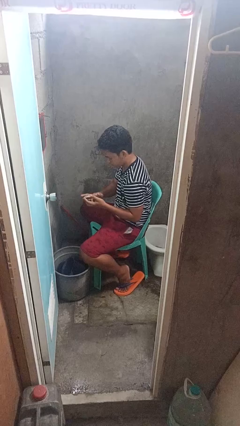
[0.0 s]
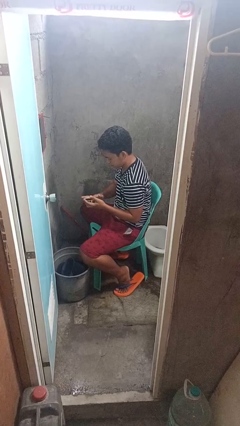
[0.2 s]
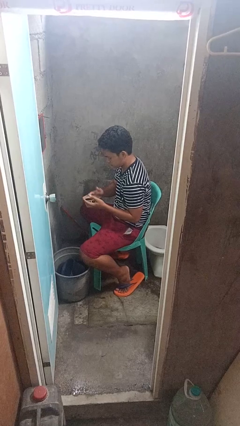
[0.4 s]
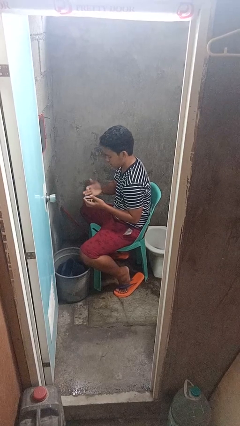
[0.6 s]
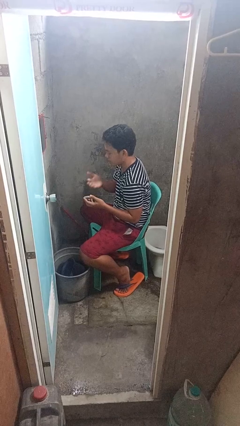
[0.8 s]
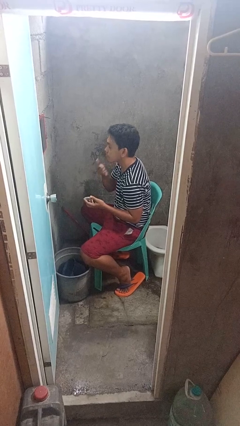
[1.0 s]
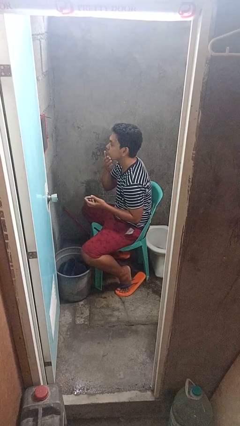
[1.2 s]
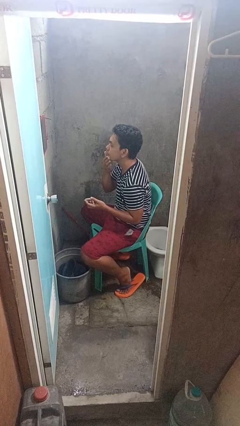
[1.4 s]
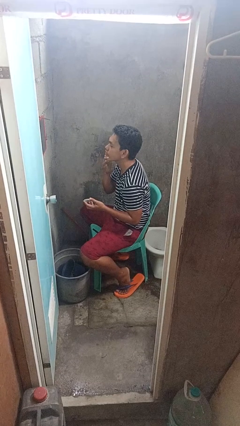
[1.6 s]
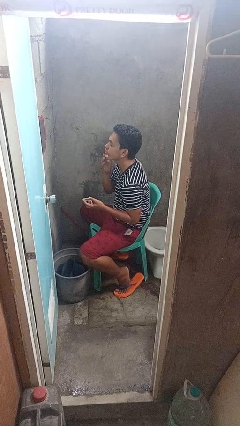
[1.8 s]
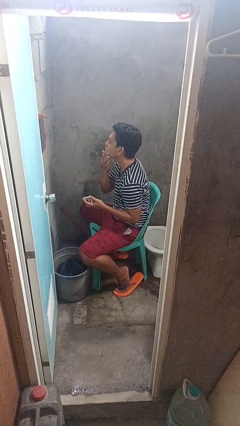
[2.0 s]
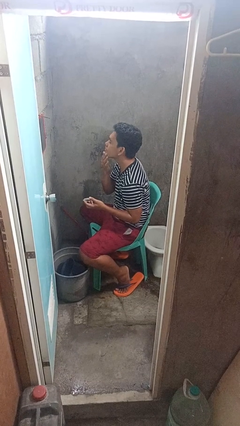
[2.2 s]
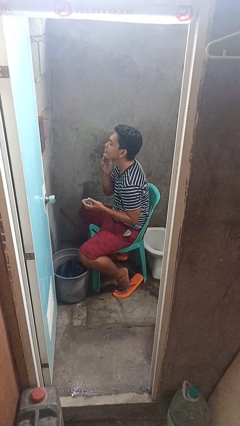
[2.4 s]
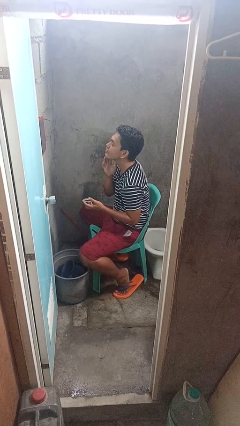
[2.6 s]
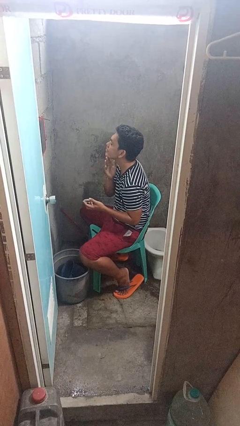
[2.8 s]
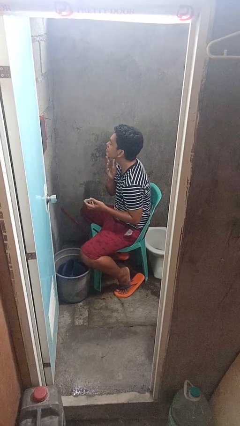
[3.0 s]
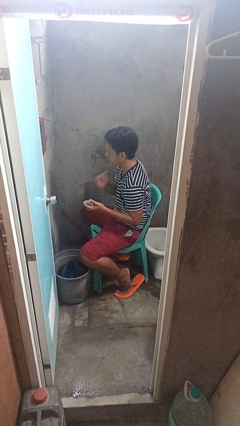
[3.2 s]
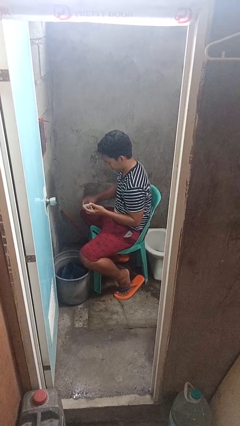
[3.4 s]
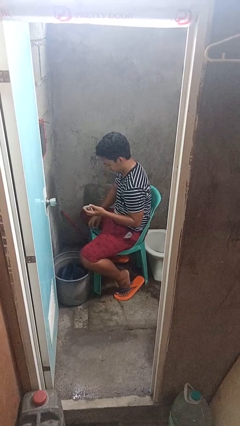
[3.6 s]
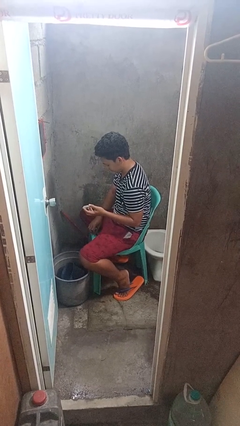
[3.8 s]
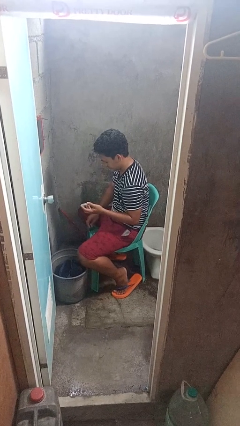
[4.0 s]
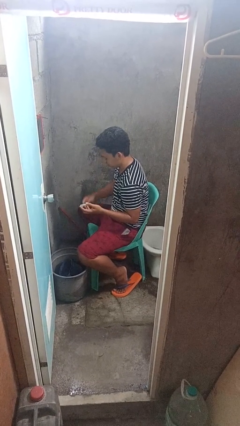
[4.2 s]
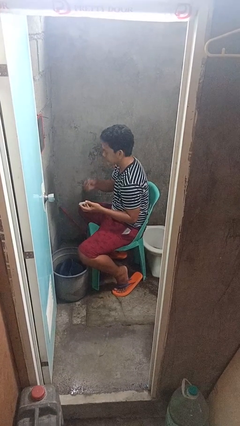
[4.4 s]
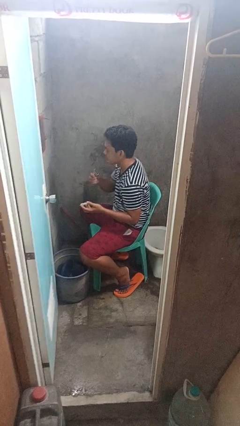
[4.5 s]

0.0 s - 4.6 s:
person applies shaving cream

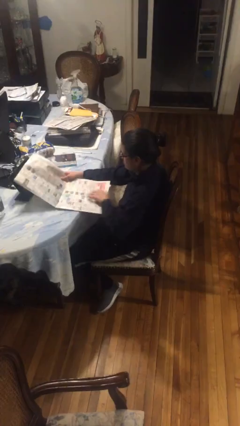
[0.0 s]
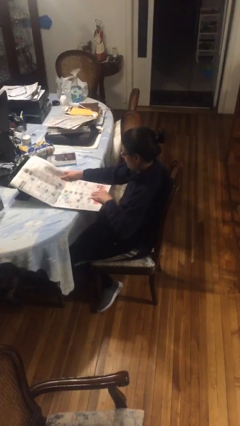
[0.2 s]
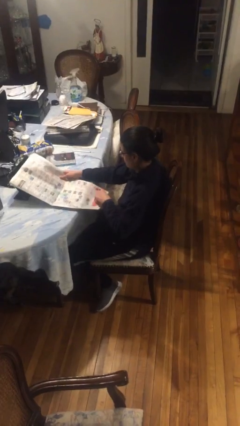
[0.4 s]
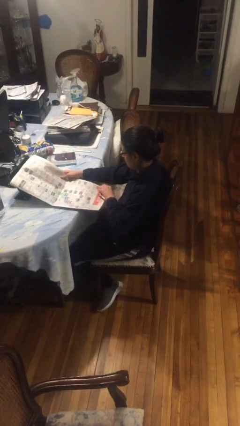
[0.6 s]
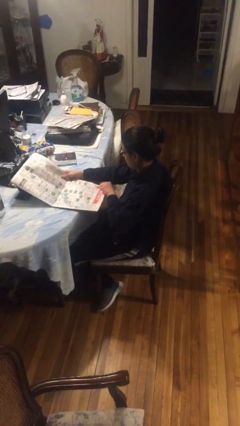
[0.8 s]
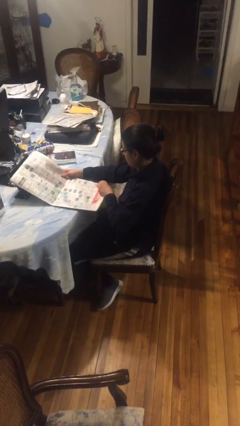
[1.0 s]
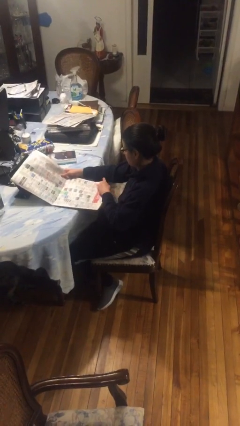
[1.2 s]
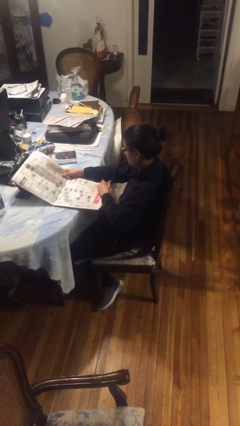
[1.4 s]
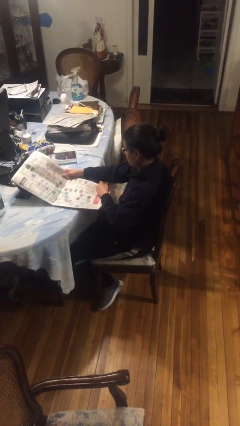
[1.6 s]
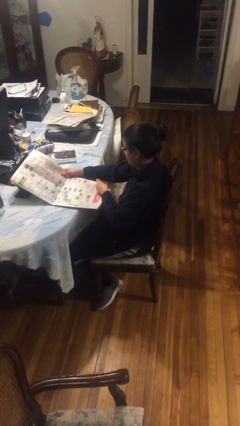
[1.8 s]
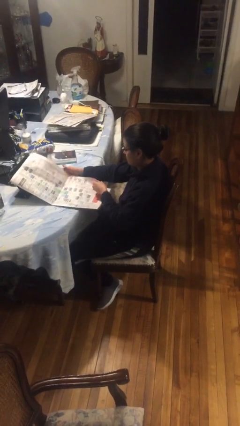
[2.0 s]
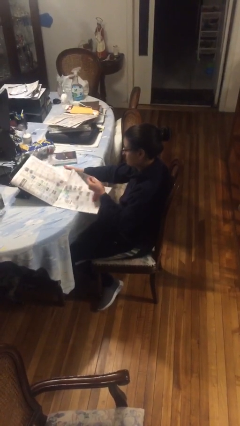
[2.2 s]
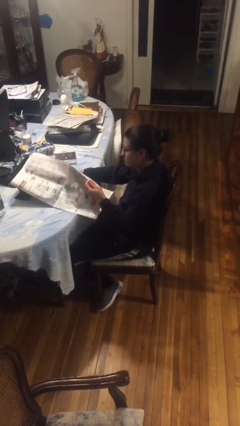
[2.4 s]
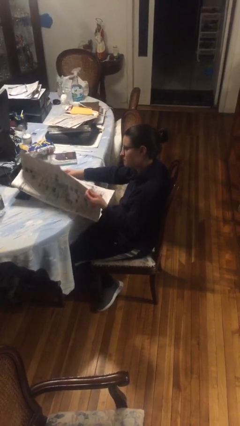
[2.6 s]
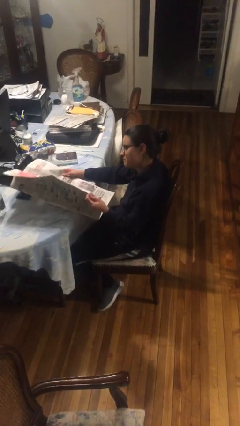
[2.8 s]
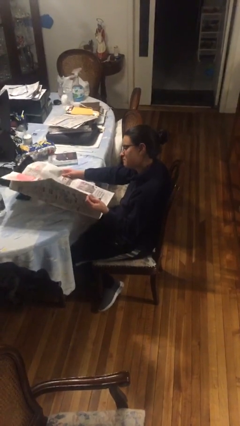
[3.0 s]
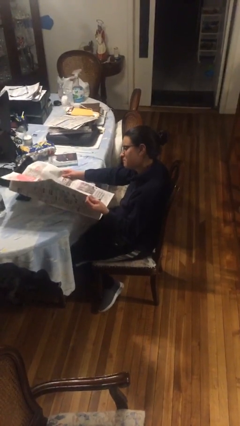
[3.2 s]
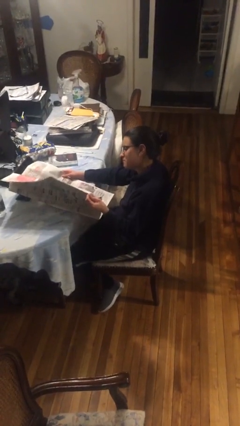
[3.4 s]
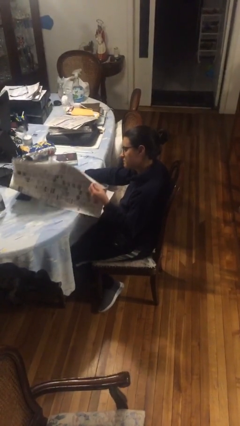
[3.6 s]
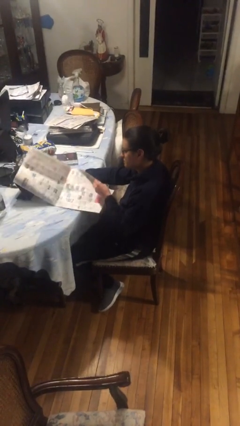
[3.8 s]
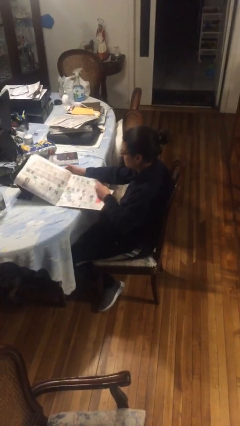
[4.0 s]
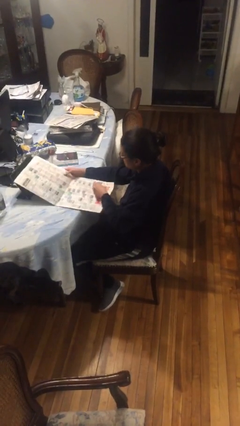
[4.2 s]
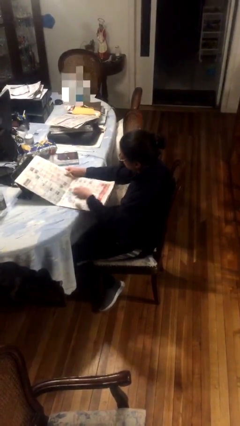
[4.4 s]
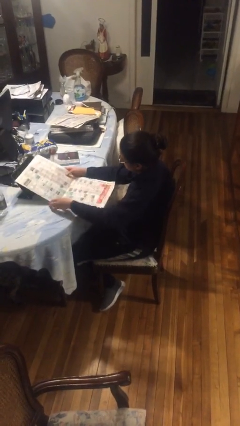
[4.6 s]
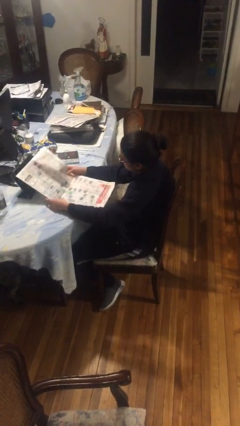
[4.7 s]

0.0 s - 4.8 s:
person reads newspaper

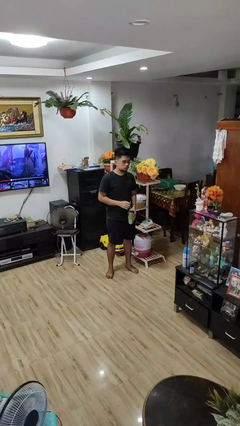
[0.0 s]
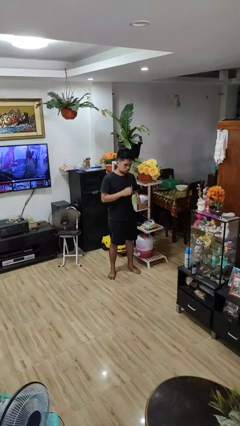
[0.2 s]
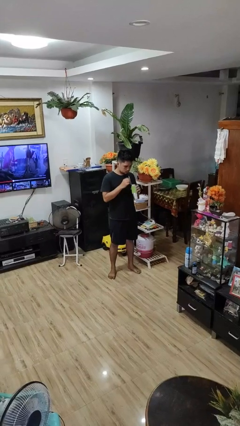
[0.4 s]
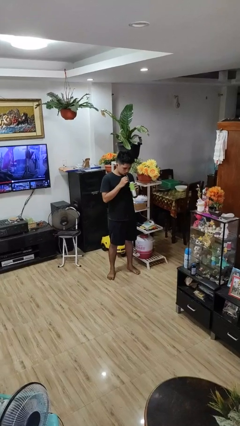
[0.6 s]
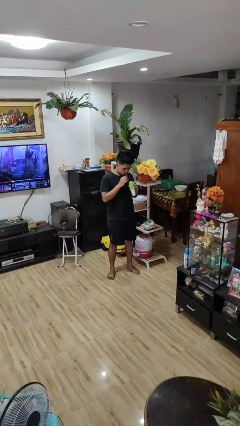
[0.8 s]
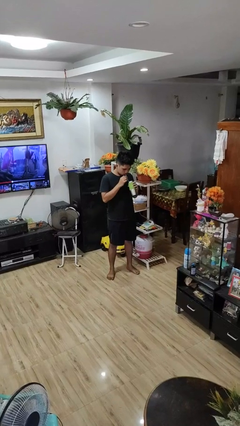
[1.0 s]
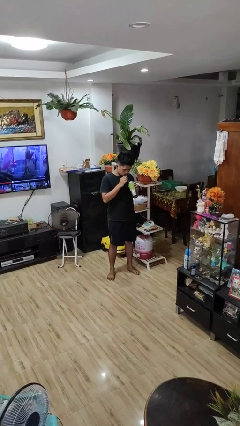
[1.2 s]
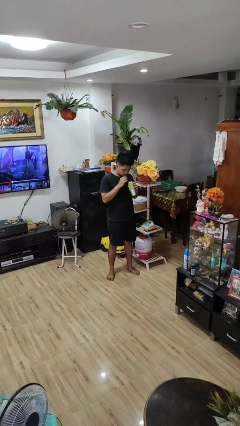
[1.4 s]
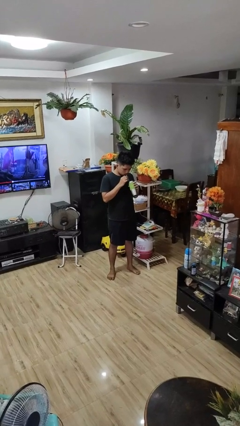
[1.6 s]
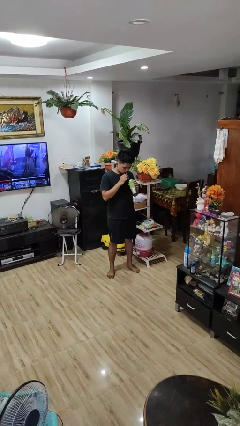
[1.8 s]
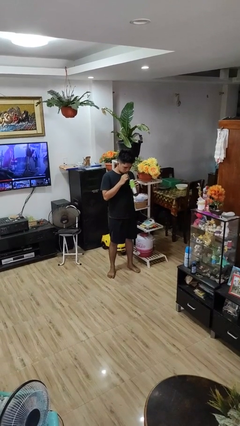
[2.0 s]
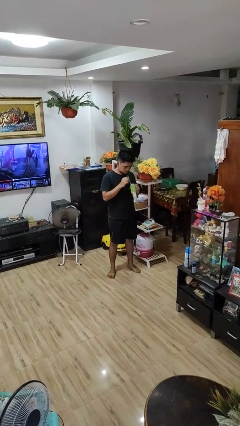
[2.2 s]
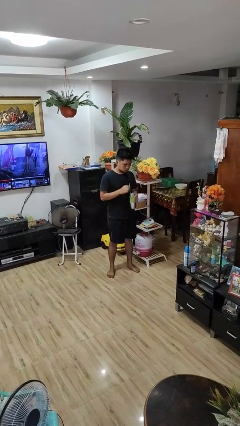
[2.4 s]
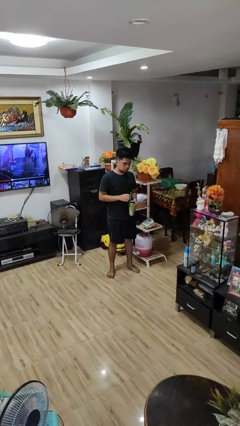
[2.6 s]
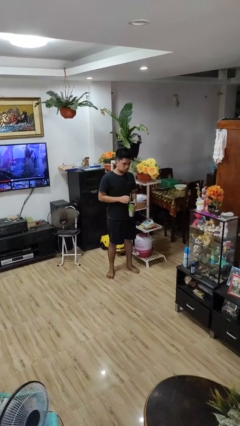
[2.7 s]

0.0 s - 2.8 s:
person drinks from straw

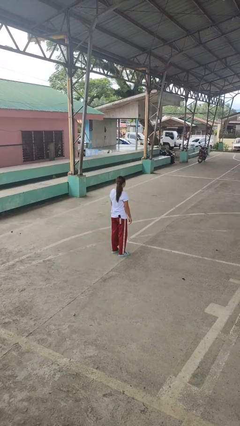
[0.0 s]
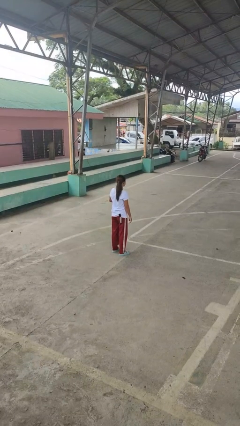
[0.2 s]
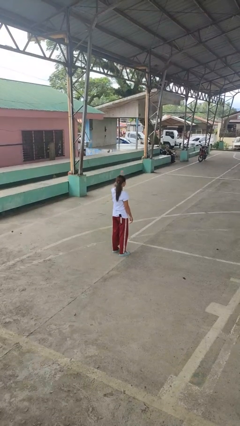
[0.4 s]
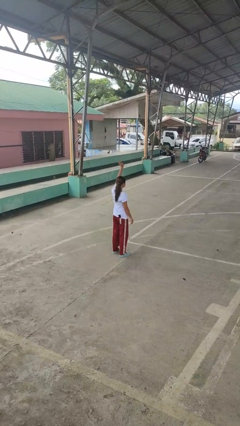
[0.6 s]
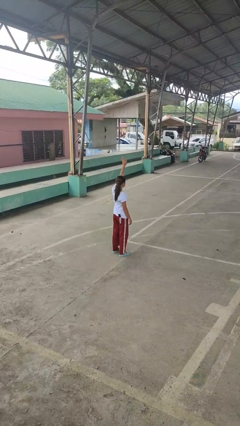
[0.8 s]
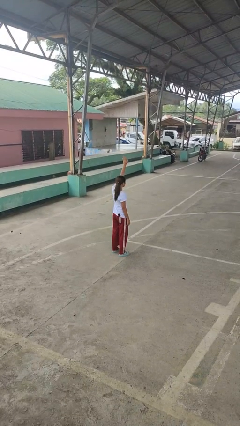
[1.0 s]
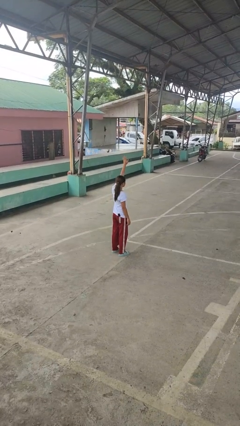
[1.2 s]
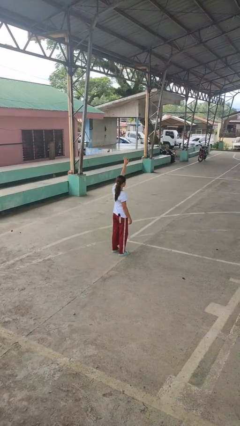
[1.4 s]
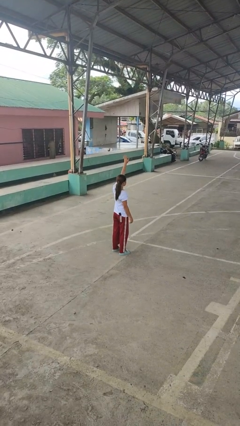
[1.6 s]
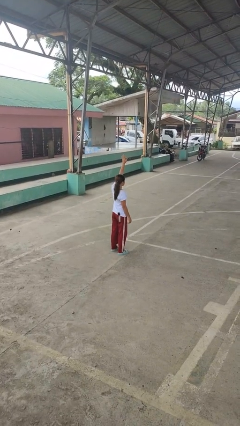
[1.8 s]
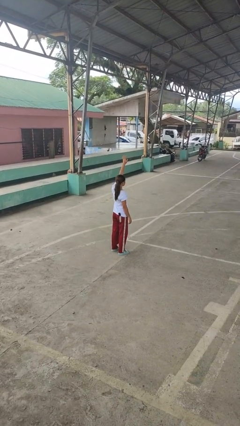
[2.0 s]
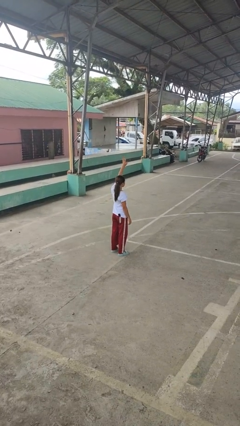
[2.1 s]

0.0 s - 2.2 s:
person gestures raise hand

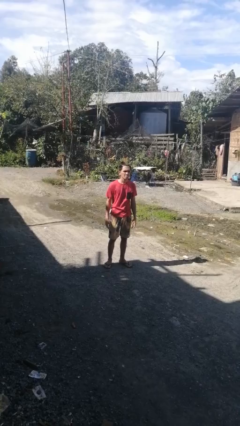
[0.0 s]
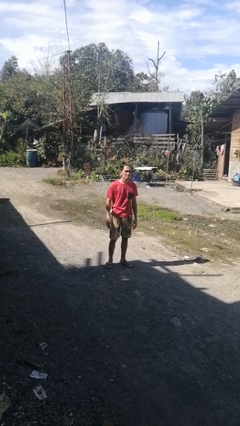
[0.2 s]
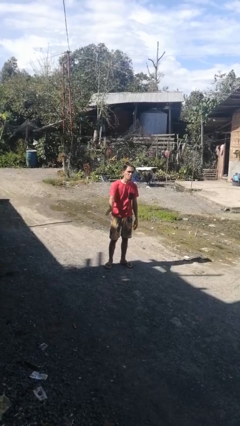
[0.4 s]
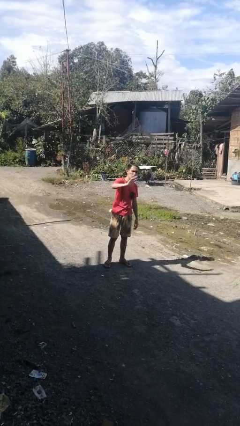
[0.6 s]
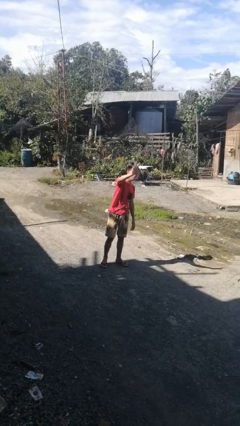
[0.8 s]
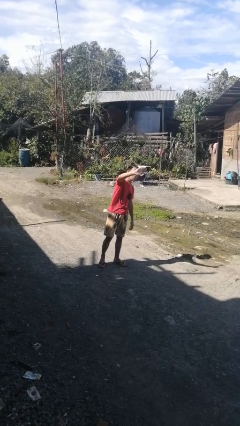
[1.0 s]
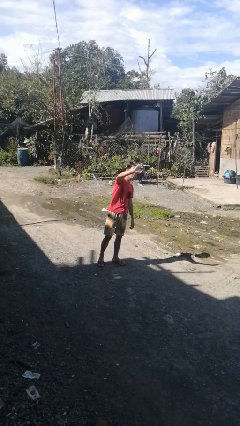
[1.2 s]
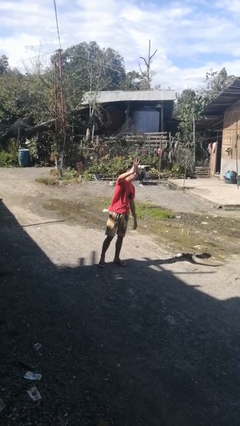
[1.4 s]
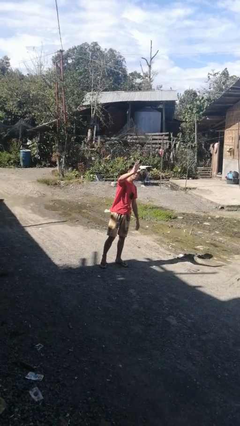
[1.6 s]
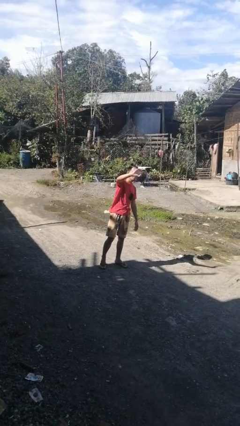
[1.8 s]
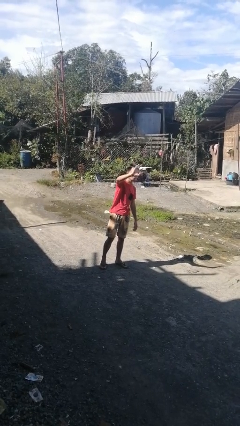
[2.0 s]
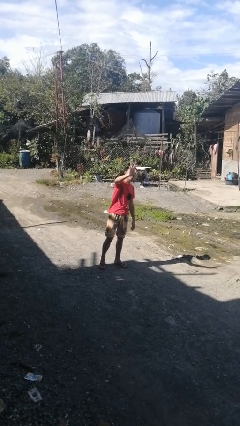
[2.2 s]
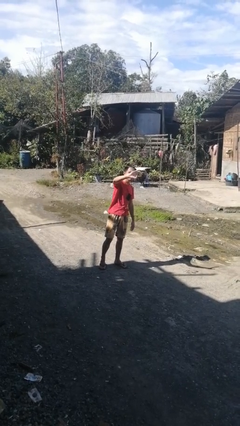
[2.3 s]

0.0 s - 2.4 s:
person waves at person

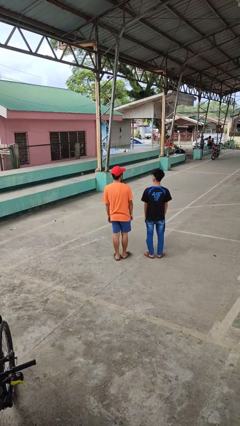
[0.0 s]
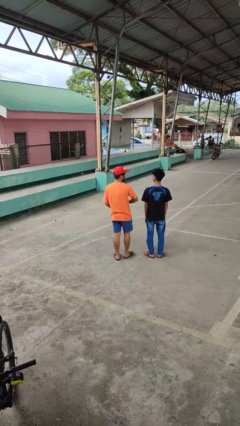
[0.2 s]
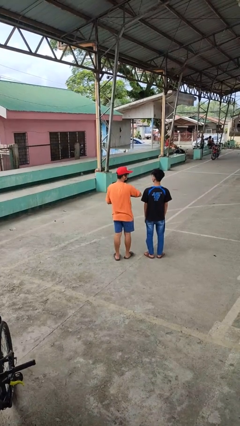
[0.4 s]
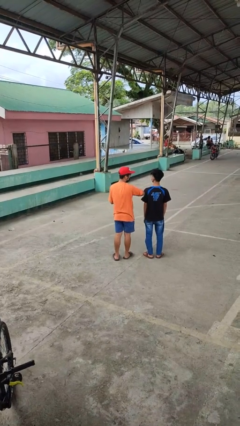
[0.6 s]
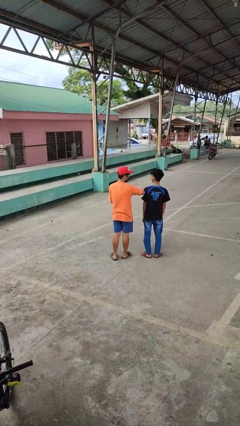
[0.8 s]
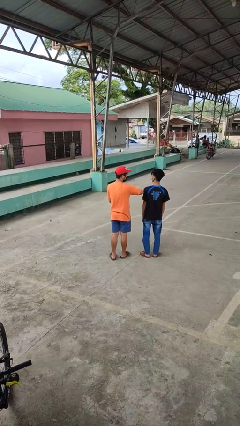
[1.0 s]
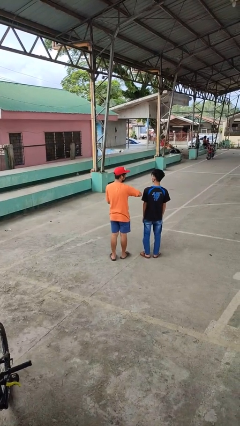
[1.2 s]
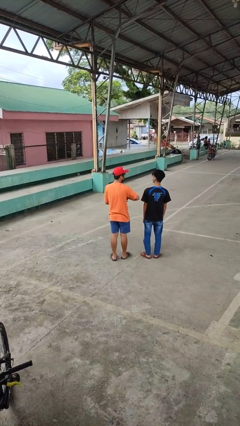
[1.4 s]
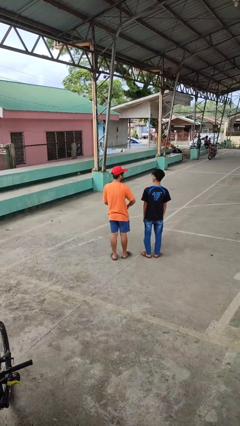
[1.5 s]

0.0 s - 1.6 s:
person nudges person with elbow
